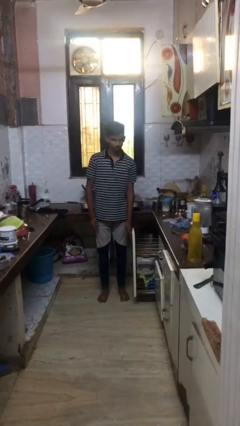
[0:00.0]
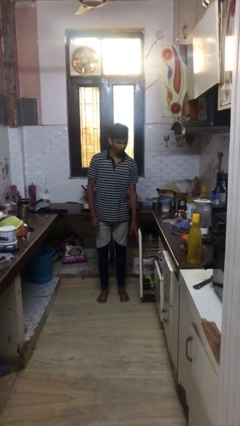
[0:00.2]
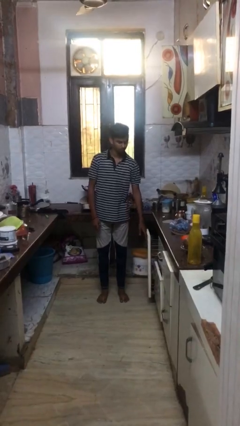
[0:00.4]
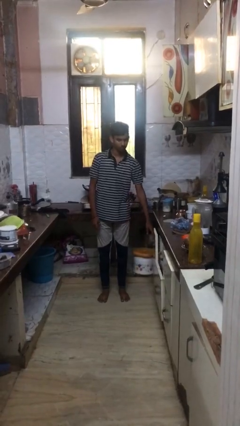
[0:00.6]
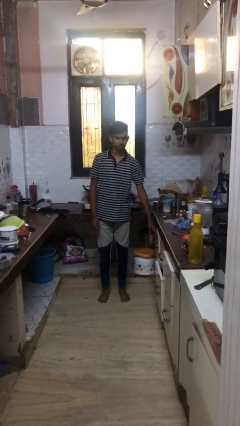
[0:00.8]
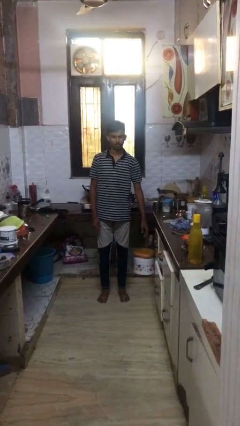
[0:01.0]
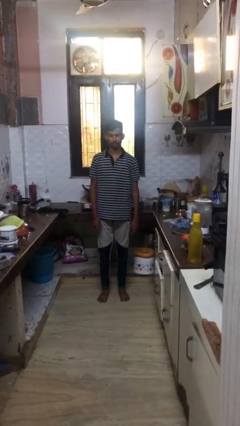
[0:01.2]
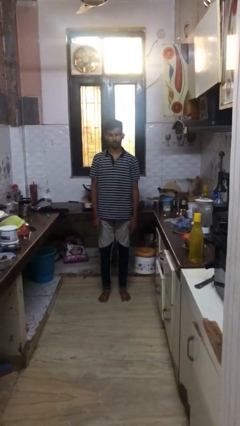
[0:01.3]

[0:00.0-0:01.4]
person closes dishwasher

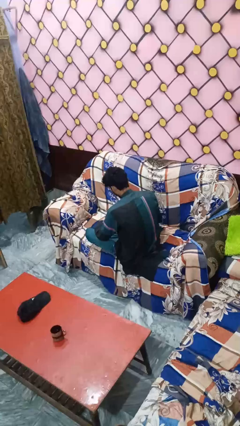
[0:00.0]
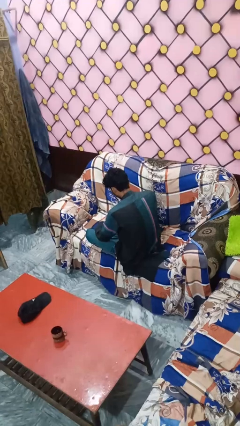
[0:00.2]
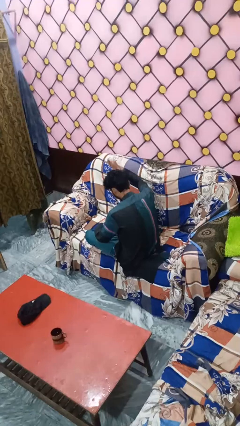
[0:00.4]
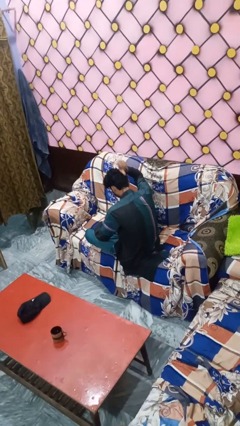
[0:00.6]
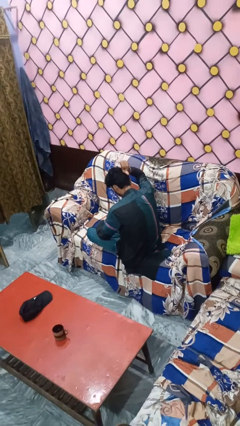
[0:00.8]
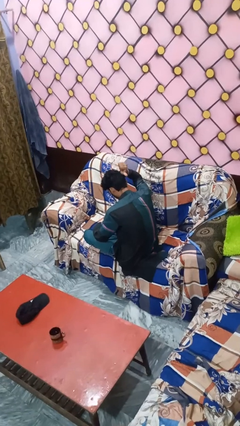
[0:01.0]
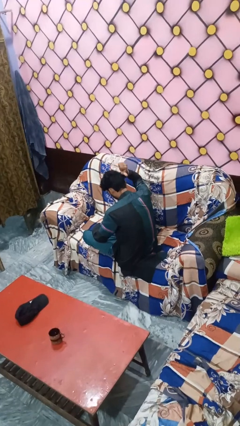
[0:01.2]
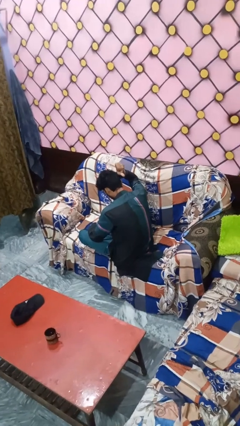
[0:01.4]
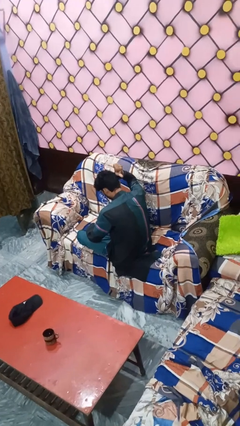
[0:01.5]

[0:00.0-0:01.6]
person gestures behind me

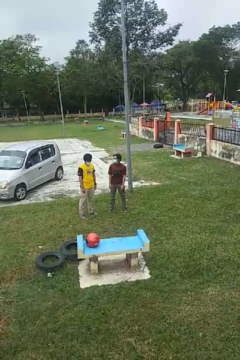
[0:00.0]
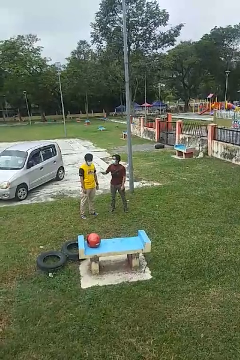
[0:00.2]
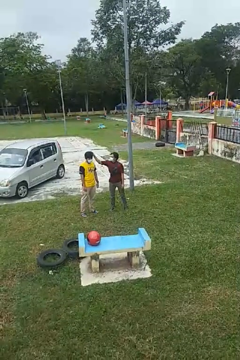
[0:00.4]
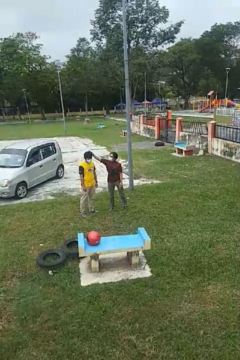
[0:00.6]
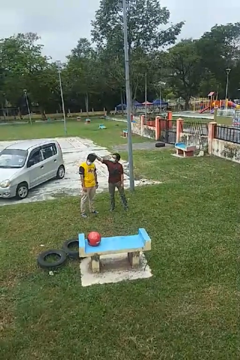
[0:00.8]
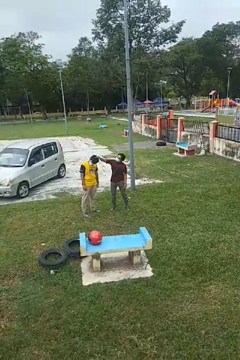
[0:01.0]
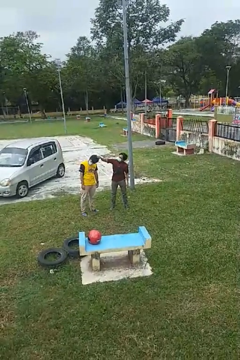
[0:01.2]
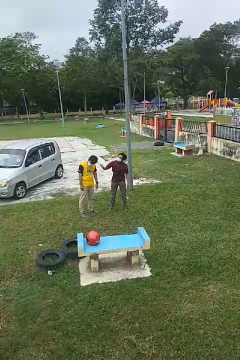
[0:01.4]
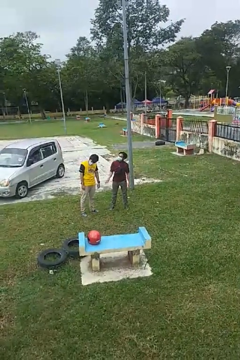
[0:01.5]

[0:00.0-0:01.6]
person grabs person by hair

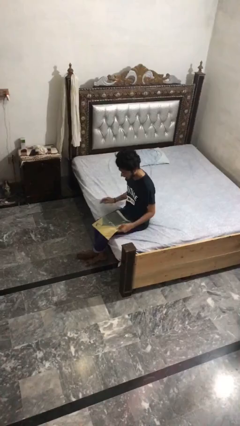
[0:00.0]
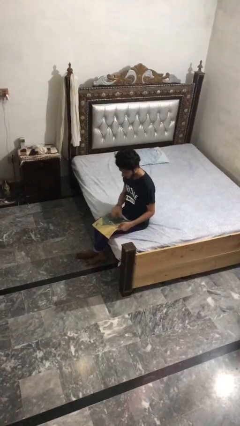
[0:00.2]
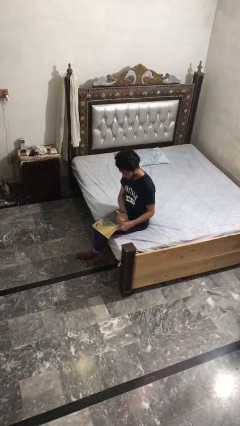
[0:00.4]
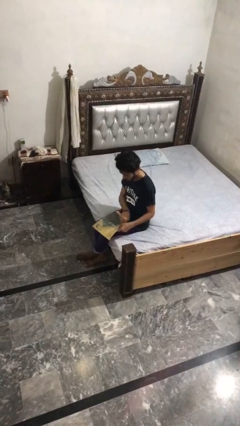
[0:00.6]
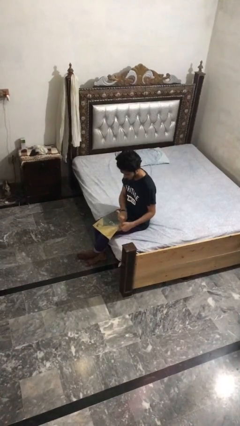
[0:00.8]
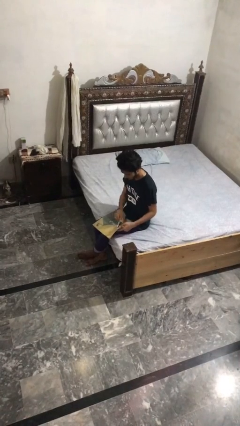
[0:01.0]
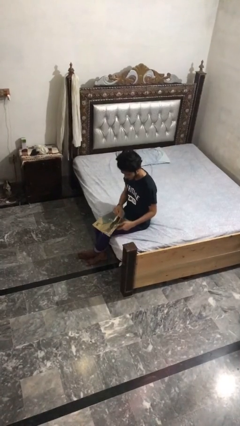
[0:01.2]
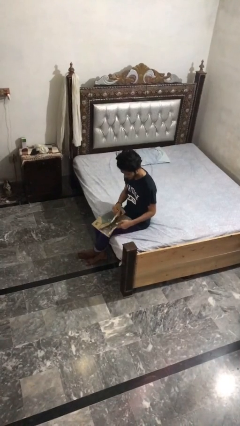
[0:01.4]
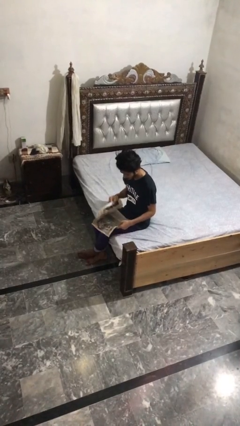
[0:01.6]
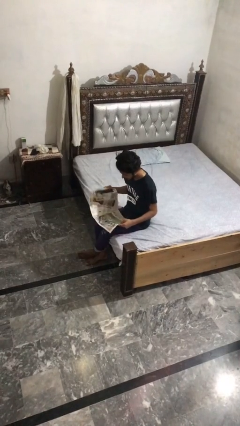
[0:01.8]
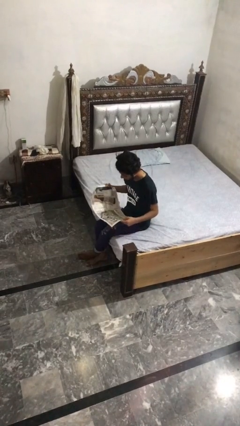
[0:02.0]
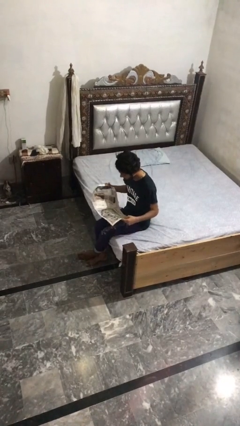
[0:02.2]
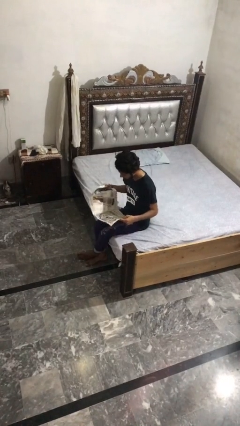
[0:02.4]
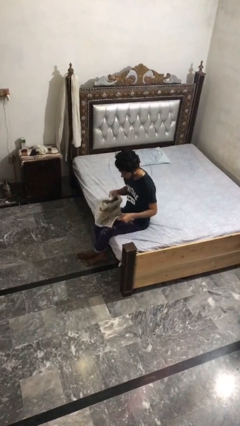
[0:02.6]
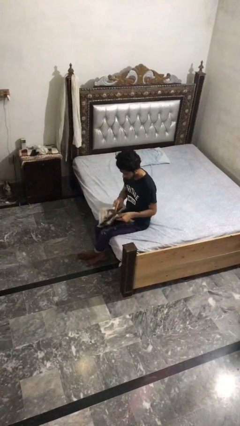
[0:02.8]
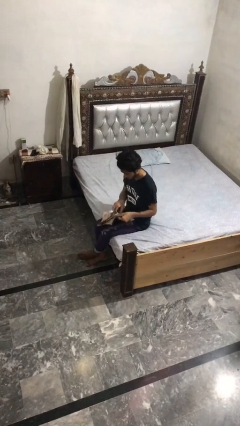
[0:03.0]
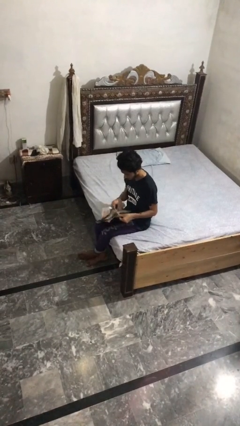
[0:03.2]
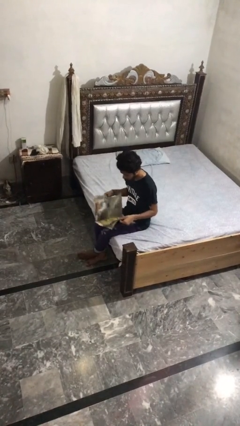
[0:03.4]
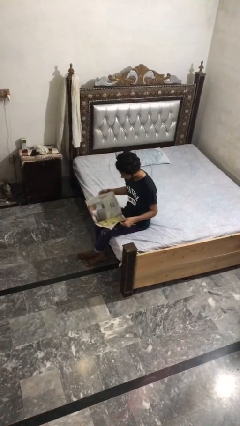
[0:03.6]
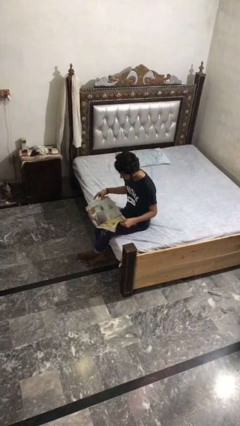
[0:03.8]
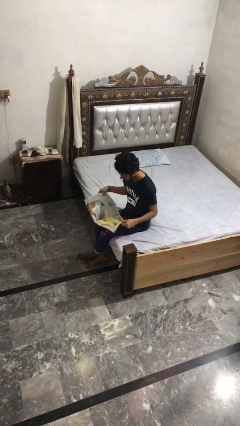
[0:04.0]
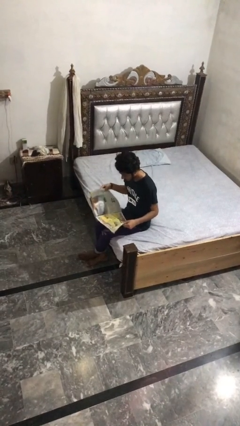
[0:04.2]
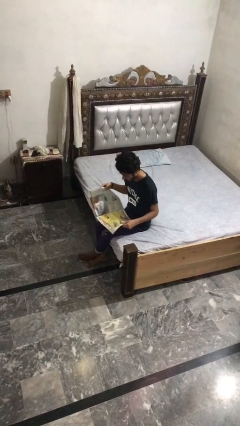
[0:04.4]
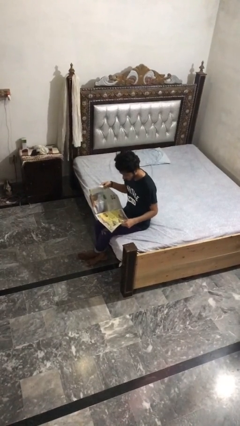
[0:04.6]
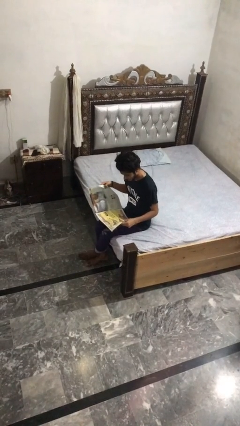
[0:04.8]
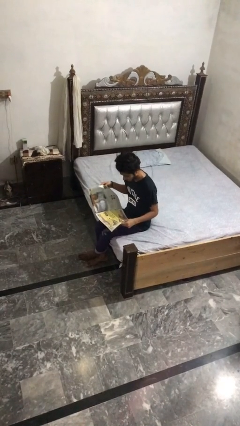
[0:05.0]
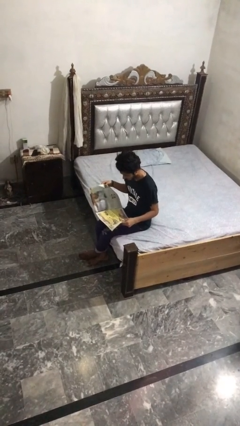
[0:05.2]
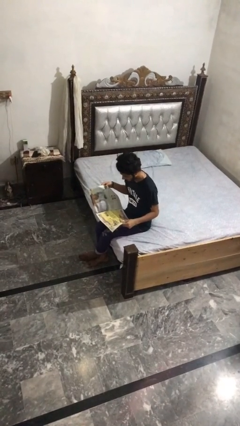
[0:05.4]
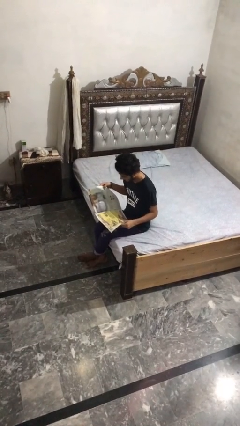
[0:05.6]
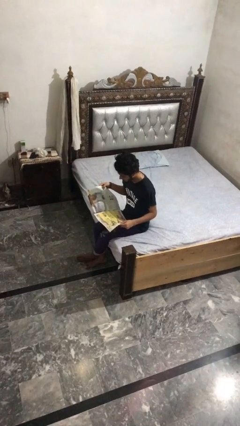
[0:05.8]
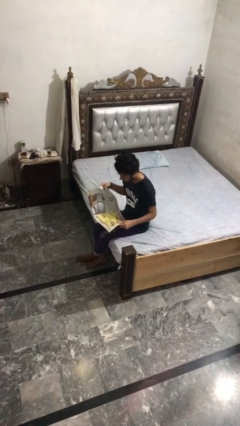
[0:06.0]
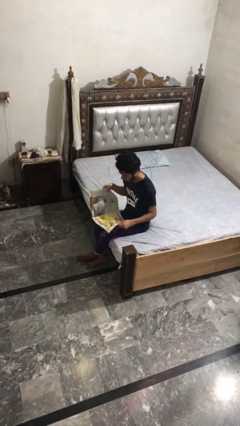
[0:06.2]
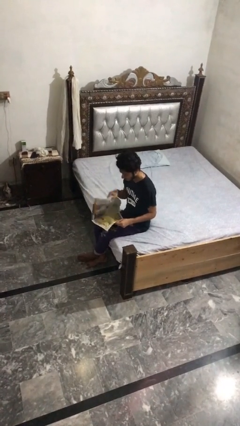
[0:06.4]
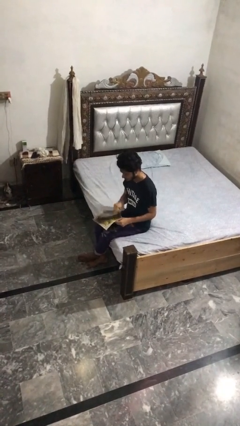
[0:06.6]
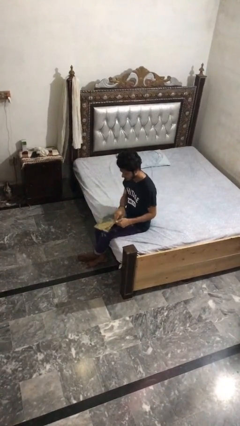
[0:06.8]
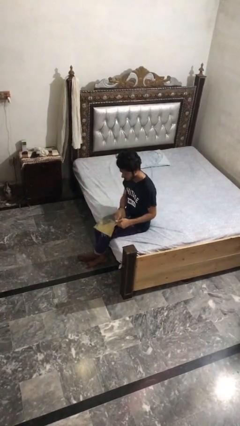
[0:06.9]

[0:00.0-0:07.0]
person reads magazine

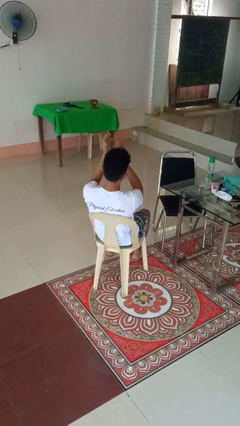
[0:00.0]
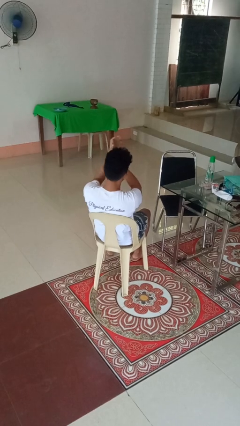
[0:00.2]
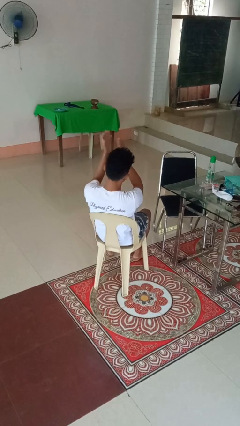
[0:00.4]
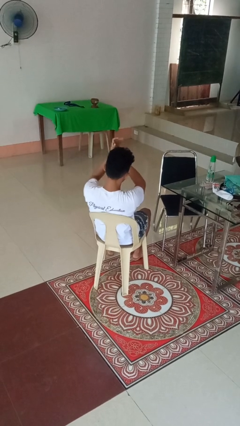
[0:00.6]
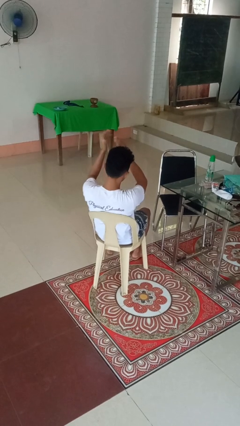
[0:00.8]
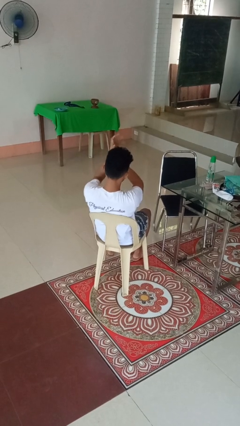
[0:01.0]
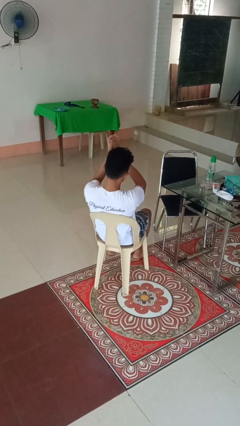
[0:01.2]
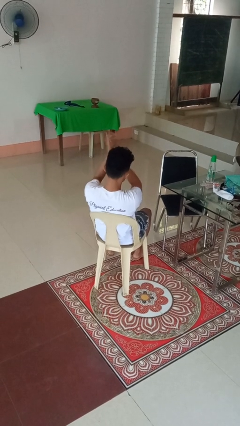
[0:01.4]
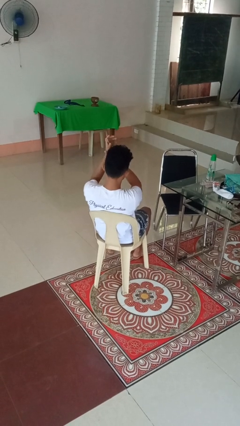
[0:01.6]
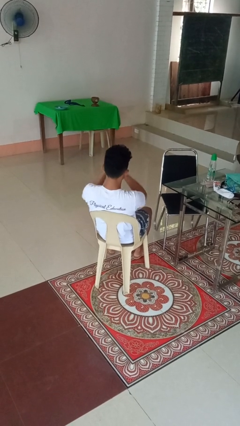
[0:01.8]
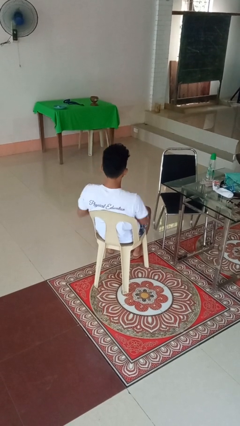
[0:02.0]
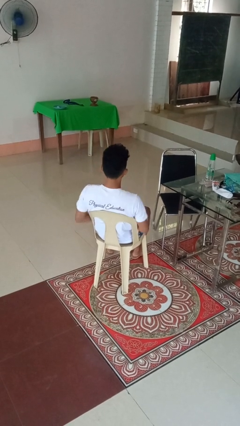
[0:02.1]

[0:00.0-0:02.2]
person claps hands

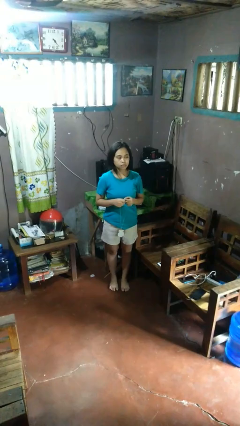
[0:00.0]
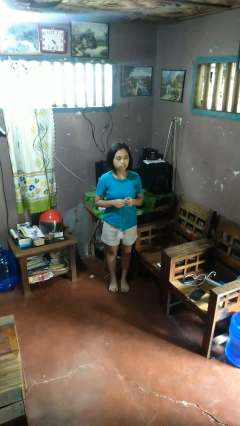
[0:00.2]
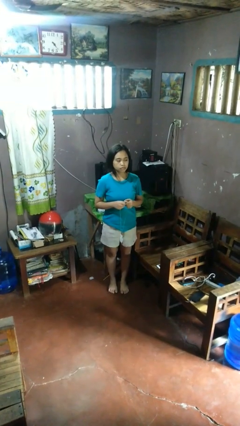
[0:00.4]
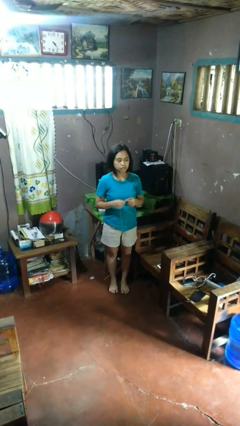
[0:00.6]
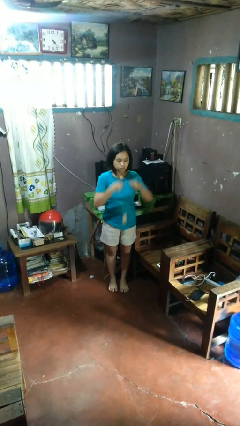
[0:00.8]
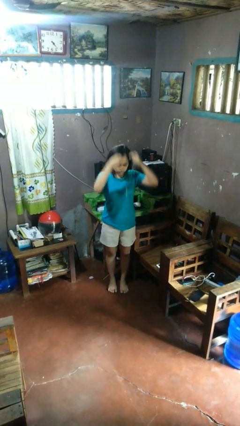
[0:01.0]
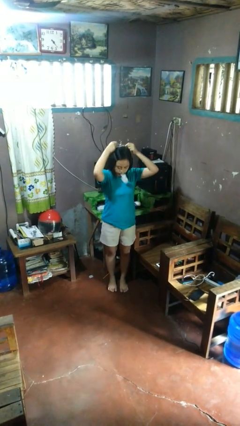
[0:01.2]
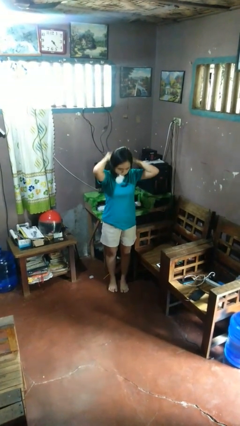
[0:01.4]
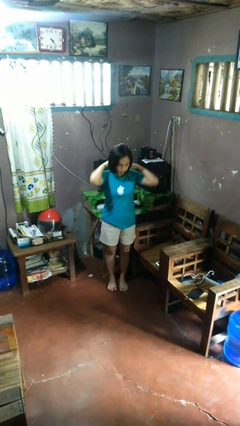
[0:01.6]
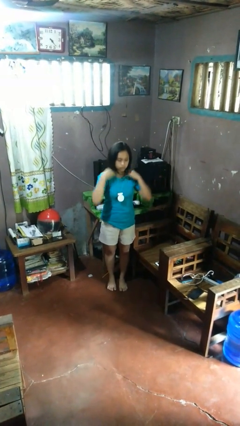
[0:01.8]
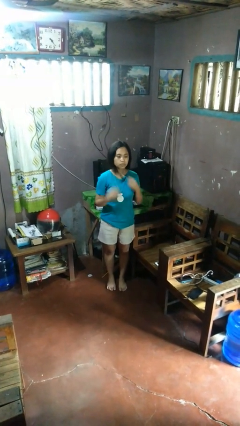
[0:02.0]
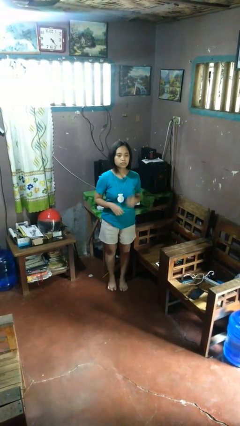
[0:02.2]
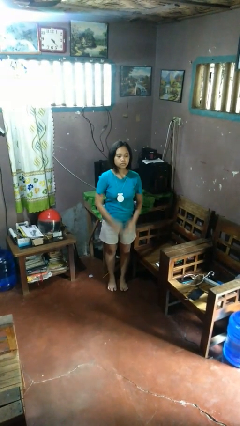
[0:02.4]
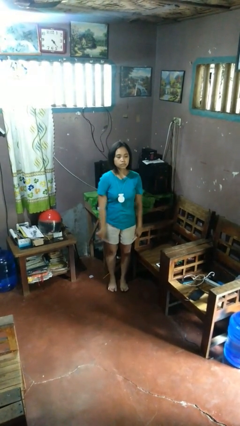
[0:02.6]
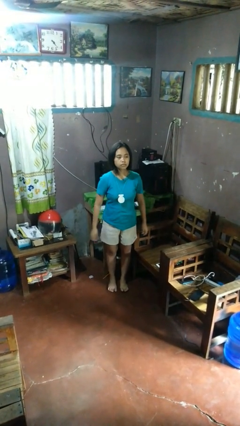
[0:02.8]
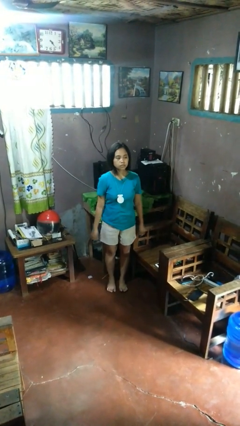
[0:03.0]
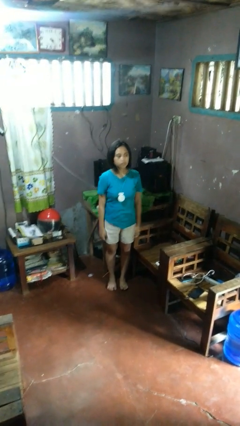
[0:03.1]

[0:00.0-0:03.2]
person puts on necklace

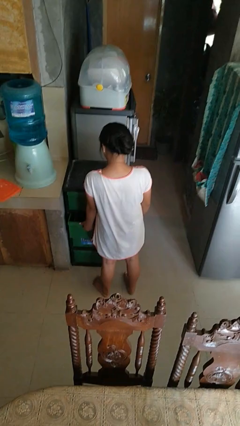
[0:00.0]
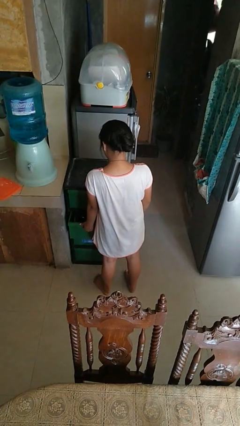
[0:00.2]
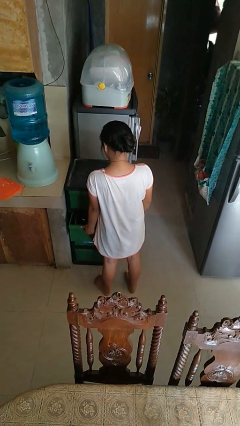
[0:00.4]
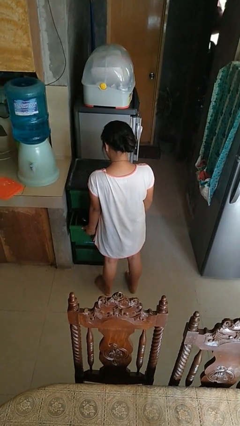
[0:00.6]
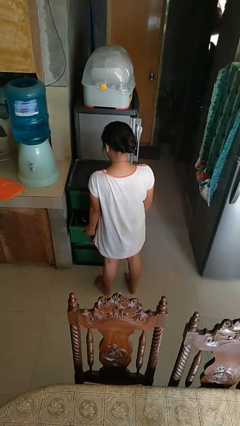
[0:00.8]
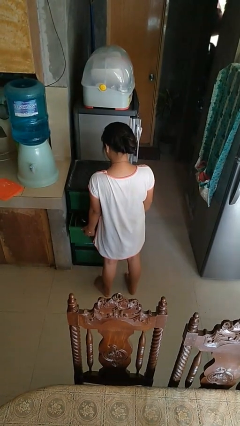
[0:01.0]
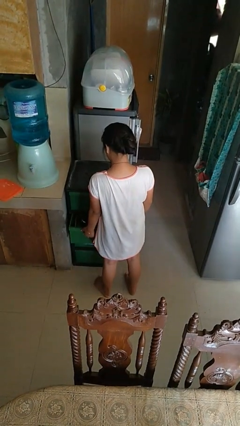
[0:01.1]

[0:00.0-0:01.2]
person opens kitchen drawer
